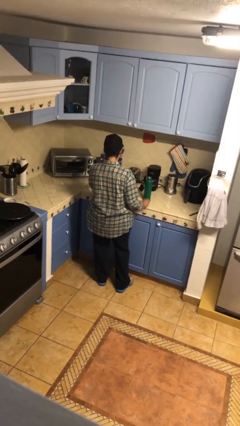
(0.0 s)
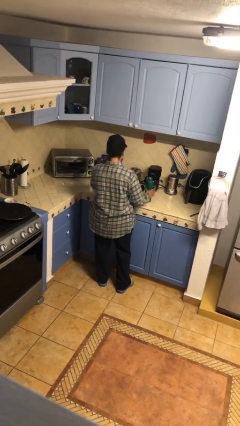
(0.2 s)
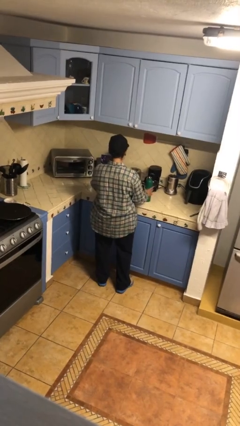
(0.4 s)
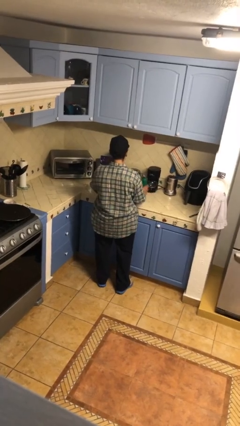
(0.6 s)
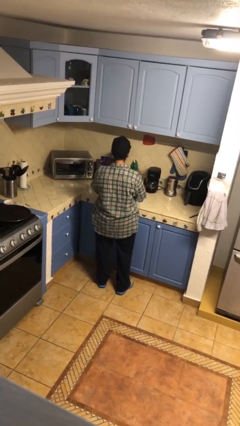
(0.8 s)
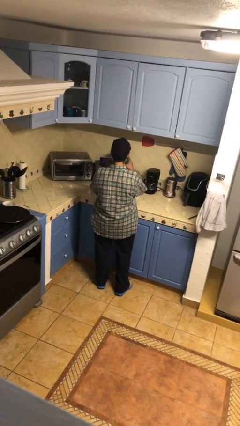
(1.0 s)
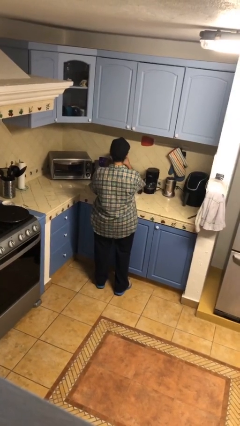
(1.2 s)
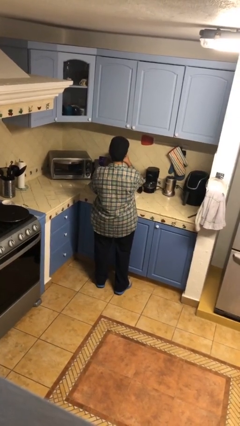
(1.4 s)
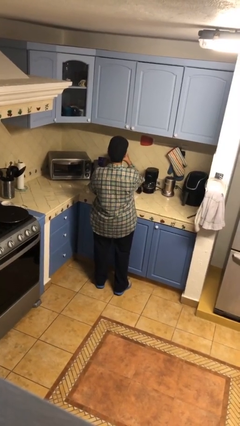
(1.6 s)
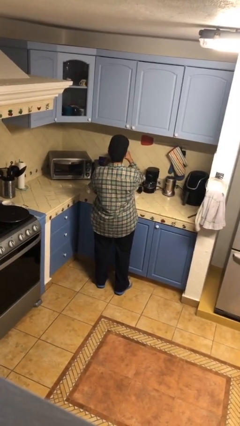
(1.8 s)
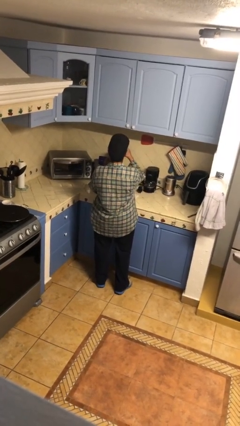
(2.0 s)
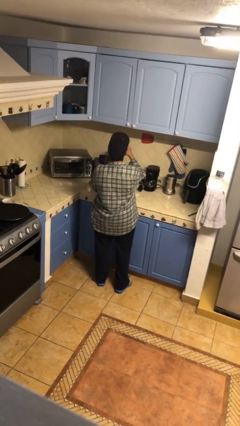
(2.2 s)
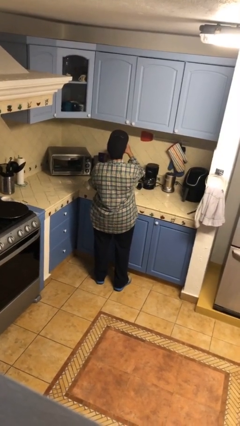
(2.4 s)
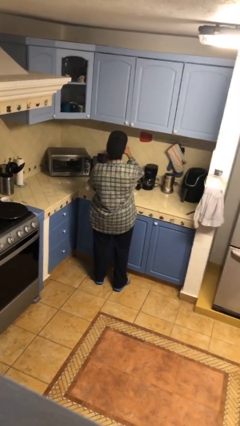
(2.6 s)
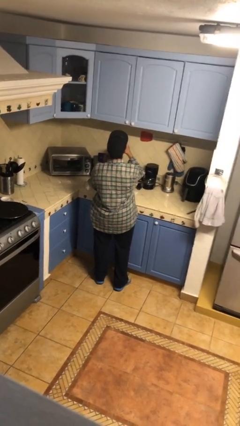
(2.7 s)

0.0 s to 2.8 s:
person drinks from bottle

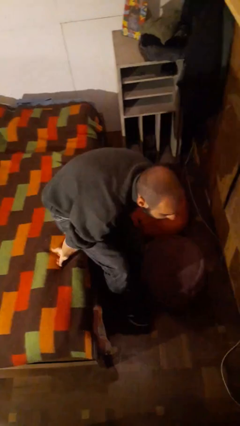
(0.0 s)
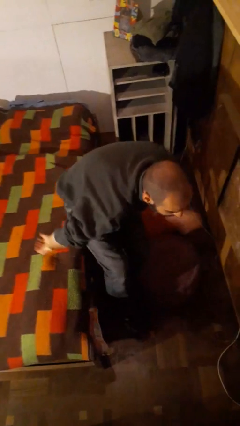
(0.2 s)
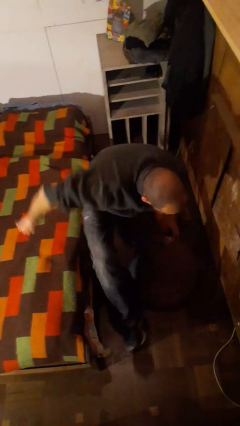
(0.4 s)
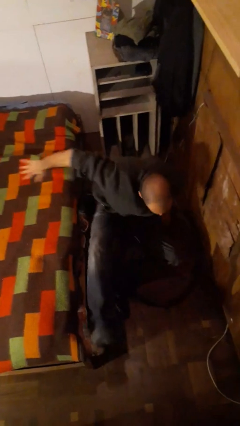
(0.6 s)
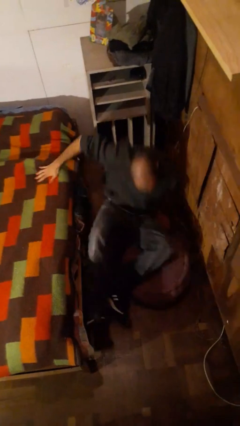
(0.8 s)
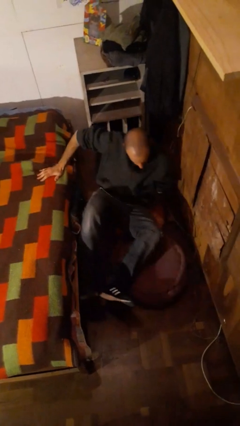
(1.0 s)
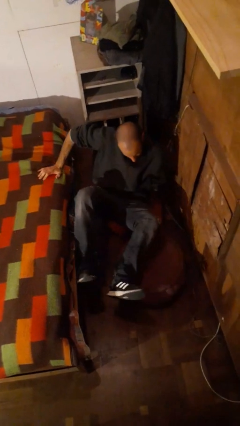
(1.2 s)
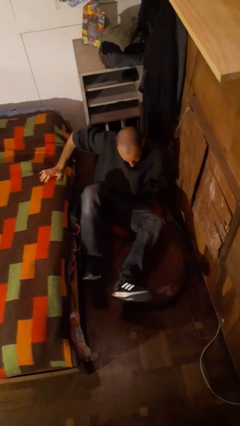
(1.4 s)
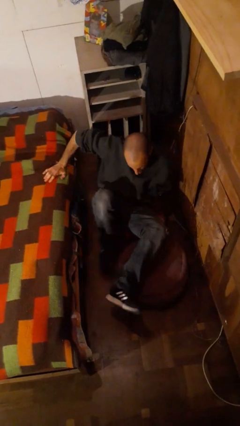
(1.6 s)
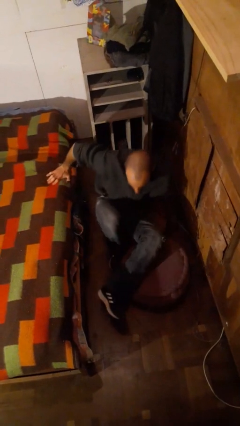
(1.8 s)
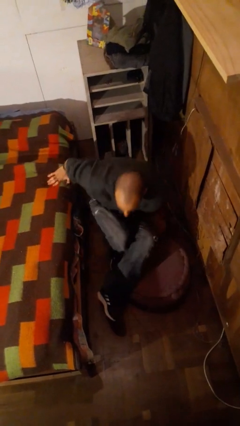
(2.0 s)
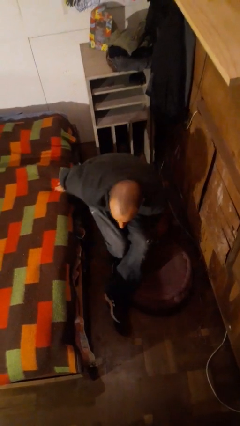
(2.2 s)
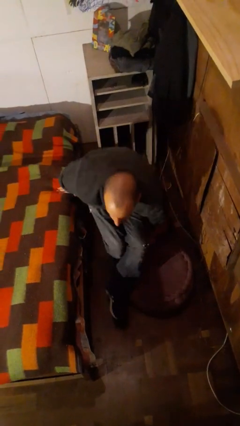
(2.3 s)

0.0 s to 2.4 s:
person falls from bed

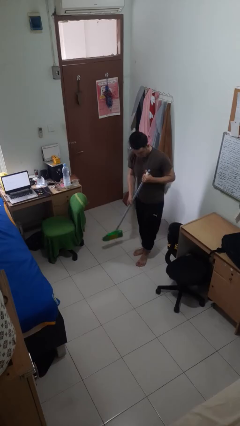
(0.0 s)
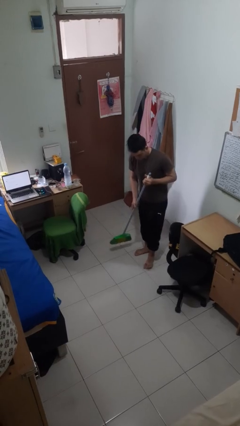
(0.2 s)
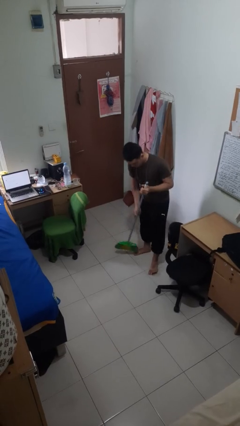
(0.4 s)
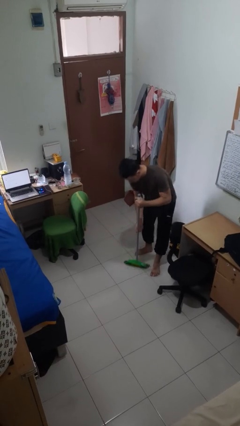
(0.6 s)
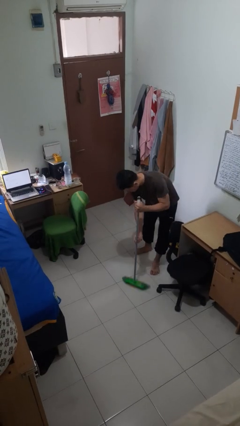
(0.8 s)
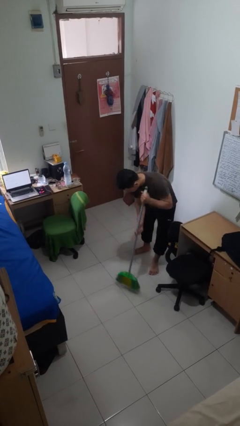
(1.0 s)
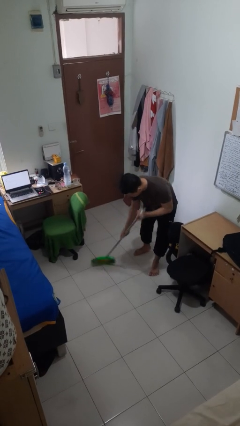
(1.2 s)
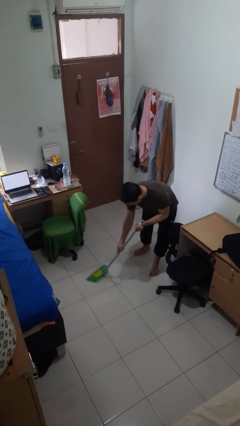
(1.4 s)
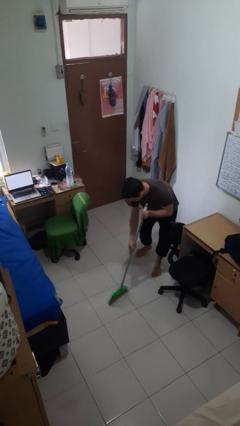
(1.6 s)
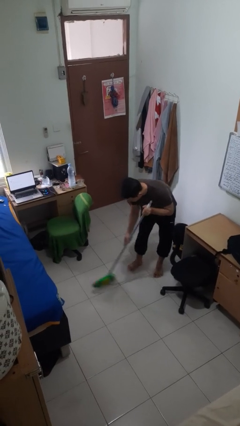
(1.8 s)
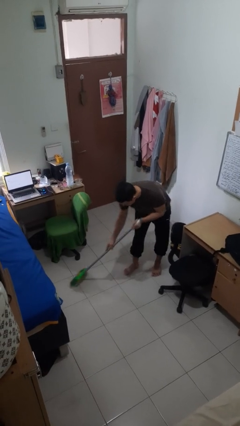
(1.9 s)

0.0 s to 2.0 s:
person sweeps floor

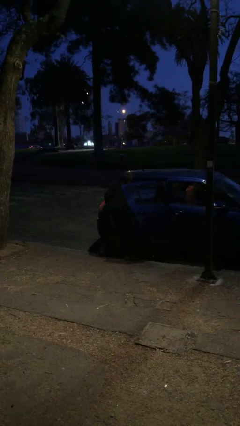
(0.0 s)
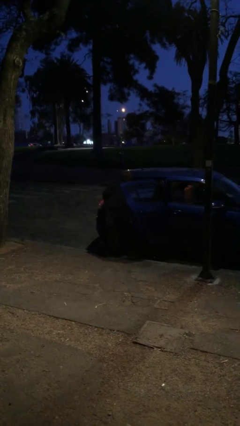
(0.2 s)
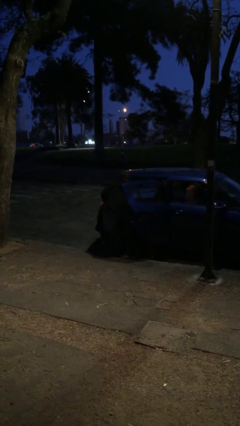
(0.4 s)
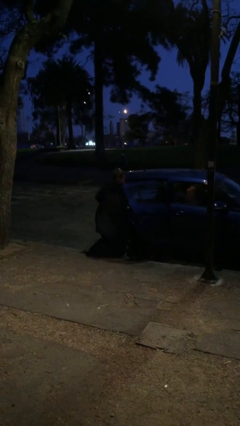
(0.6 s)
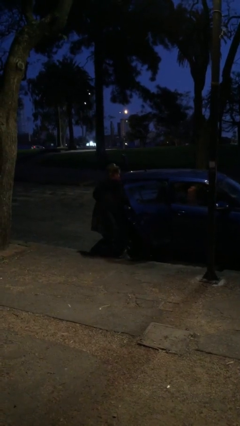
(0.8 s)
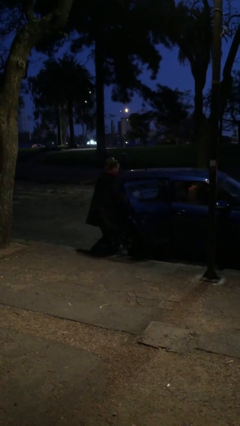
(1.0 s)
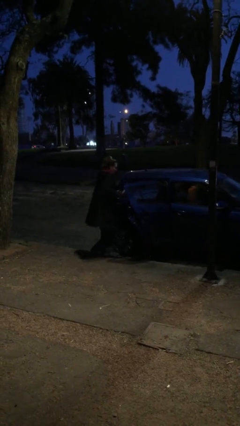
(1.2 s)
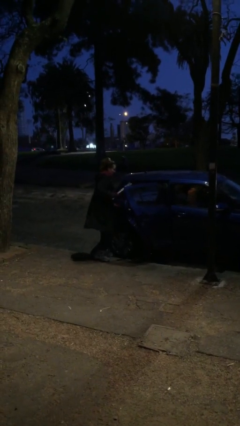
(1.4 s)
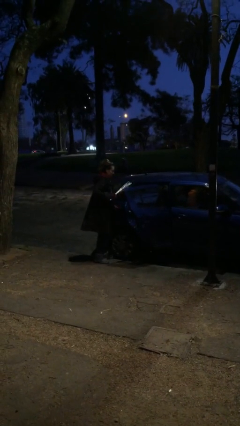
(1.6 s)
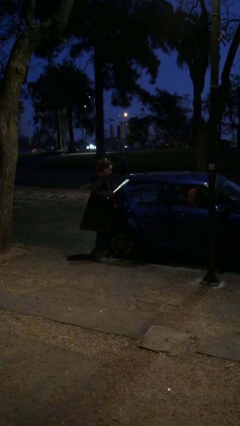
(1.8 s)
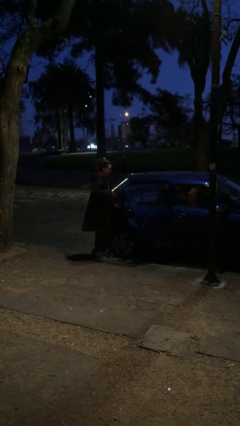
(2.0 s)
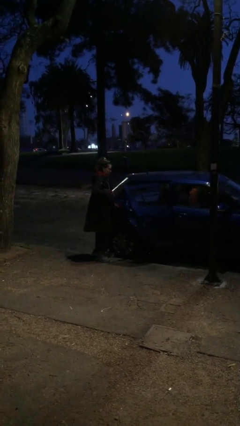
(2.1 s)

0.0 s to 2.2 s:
person unloads car

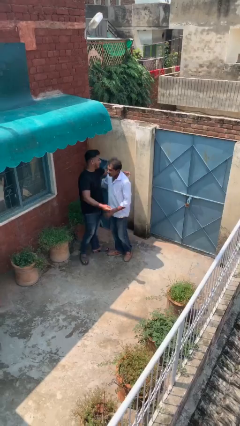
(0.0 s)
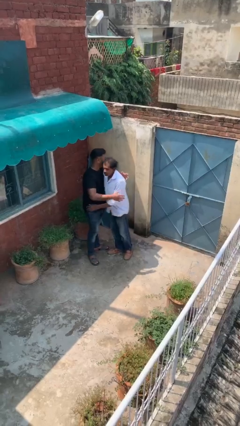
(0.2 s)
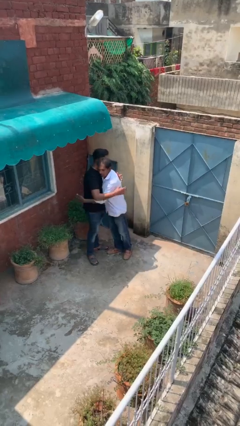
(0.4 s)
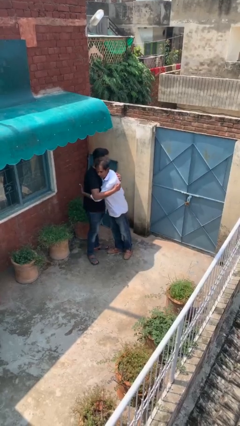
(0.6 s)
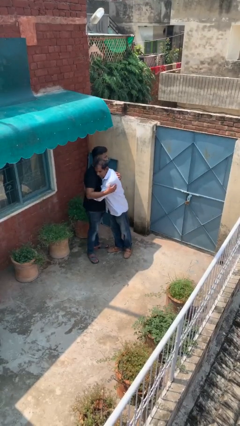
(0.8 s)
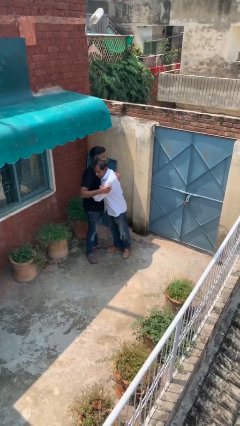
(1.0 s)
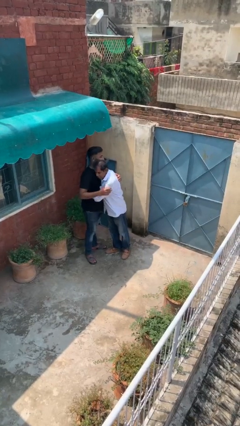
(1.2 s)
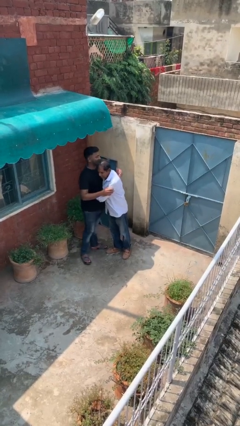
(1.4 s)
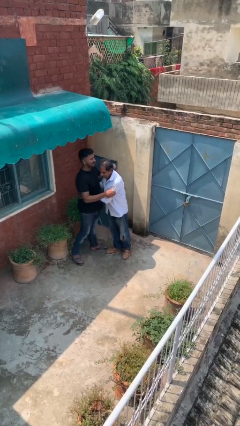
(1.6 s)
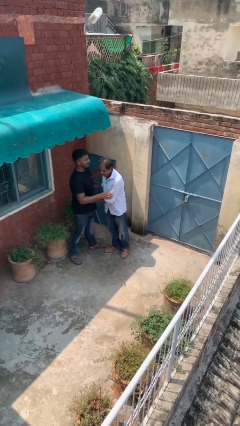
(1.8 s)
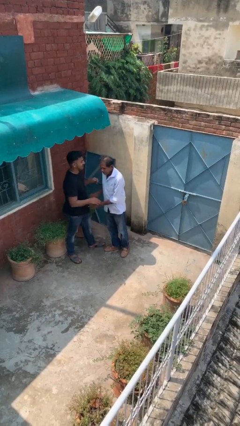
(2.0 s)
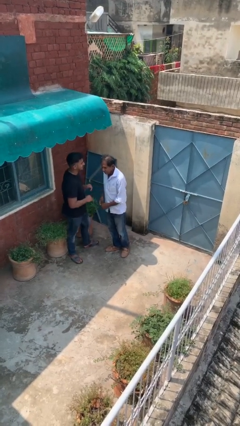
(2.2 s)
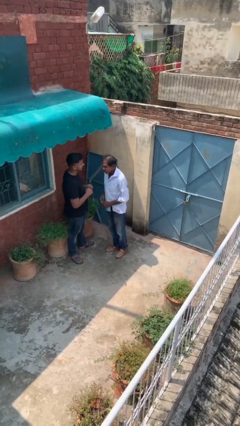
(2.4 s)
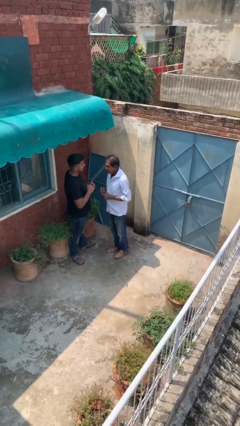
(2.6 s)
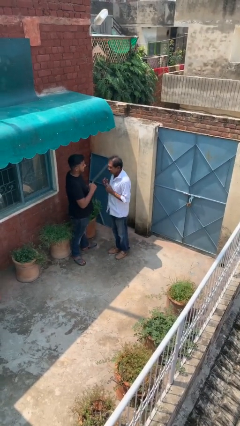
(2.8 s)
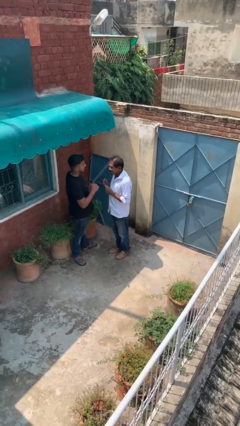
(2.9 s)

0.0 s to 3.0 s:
person embraces person

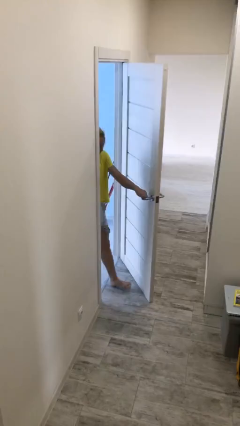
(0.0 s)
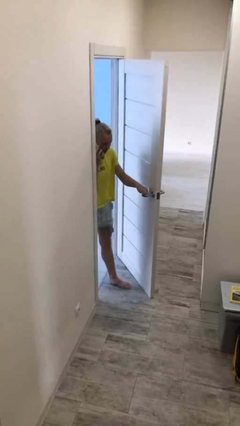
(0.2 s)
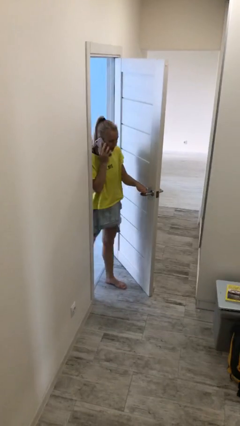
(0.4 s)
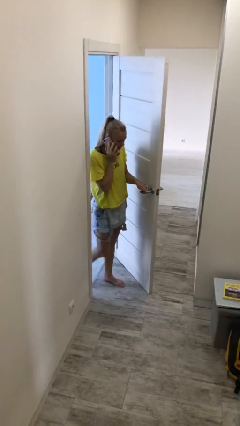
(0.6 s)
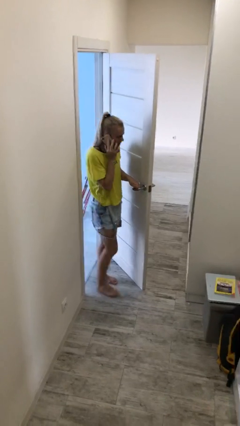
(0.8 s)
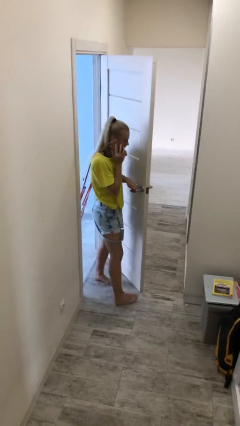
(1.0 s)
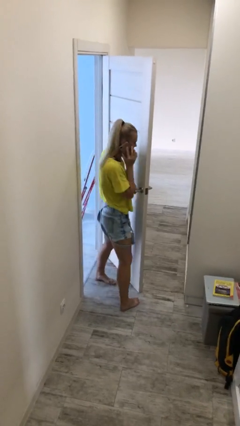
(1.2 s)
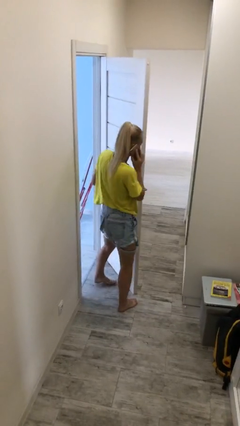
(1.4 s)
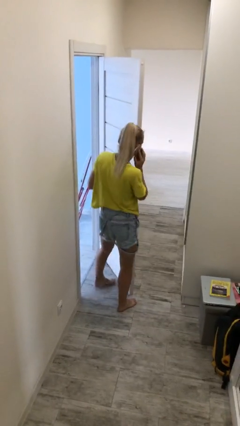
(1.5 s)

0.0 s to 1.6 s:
person enters scene through structure

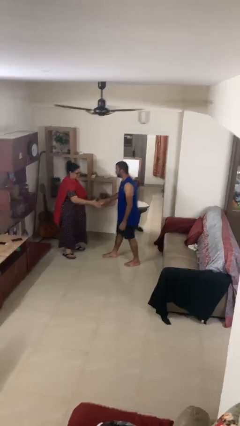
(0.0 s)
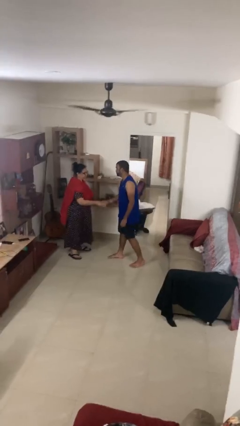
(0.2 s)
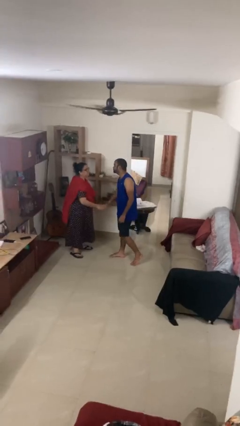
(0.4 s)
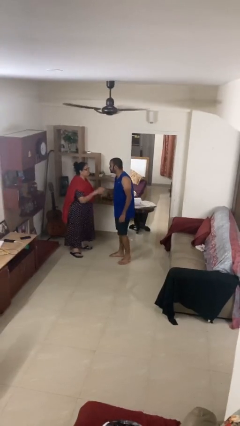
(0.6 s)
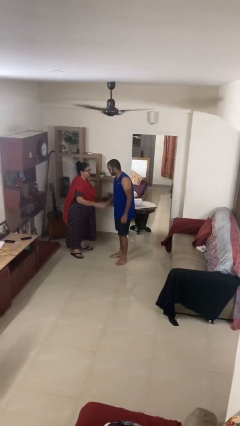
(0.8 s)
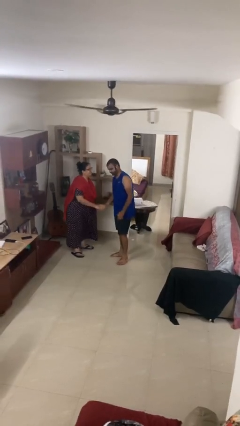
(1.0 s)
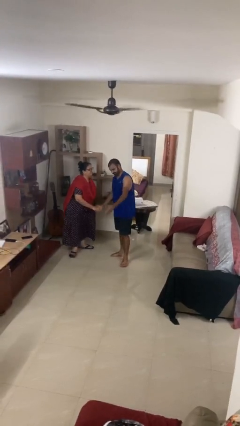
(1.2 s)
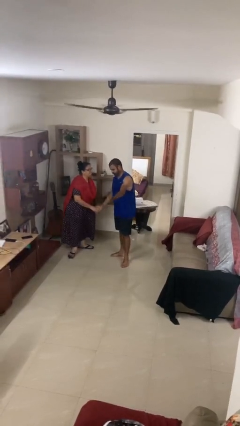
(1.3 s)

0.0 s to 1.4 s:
person shakes hand

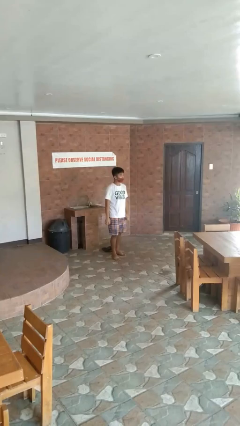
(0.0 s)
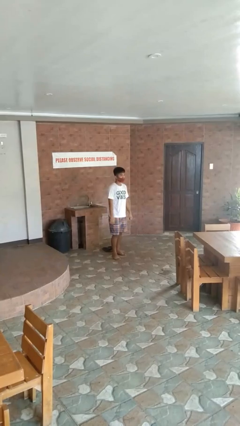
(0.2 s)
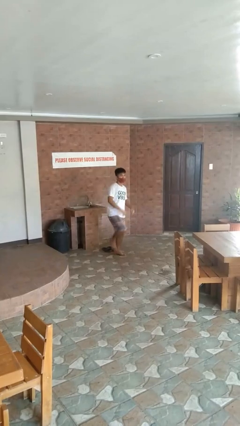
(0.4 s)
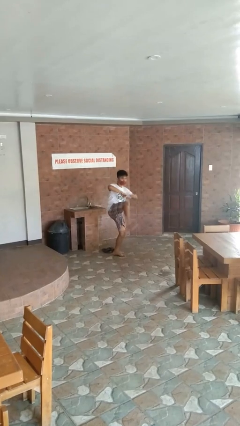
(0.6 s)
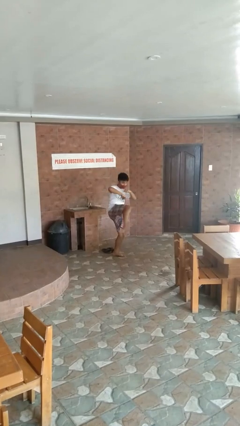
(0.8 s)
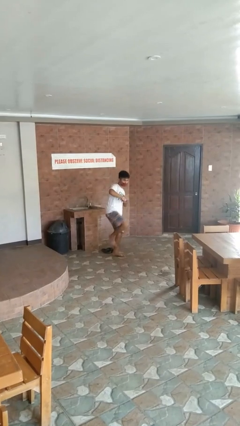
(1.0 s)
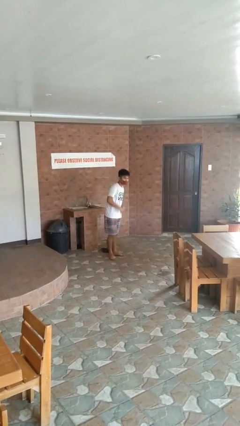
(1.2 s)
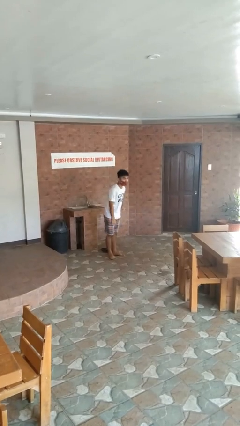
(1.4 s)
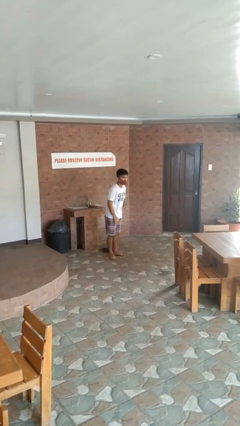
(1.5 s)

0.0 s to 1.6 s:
person karate kicks
